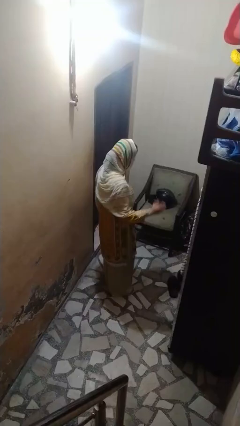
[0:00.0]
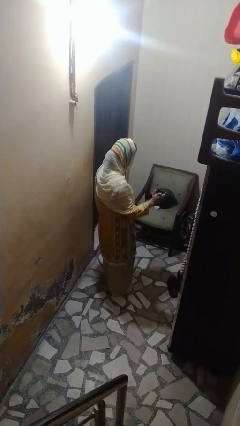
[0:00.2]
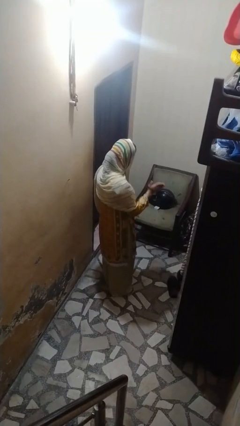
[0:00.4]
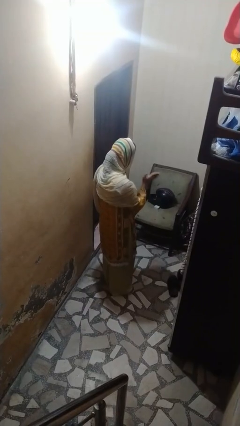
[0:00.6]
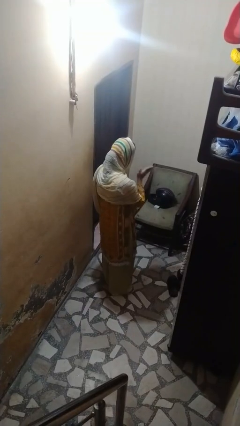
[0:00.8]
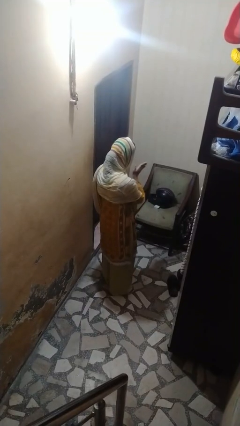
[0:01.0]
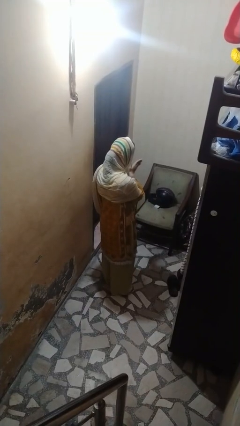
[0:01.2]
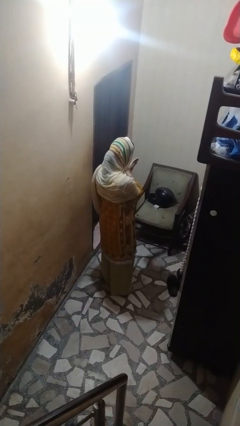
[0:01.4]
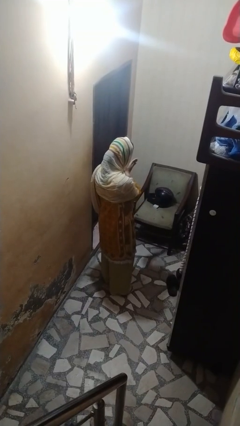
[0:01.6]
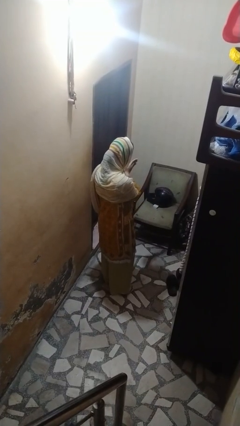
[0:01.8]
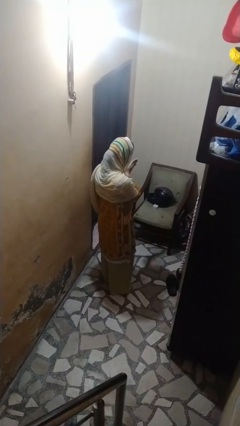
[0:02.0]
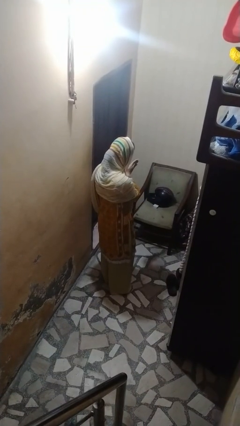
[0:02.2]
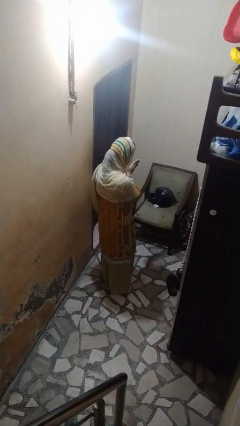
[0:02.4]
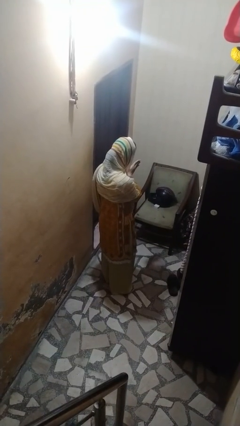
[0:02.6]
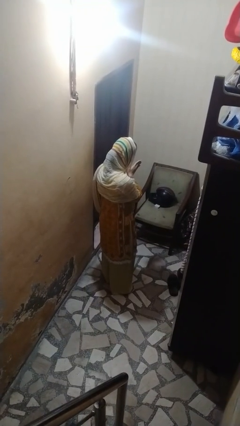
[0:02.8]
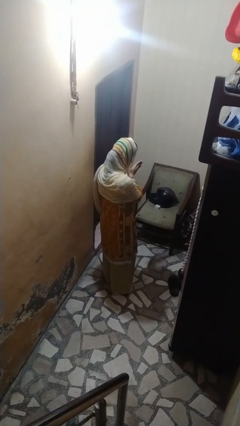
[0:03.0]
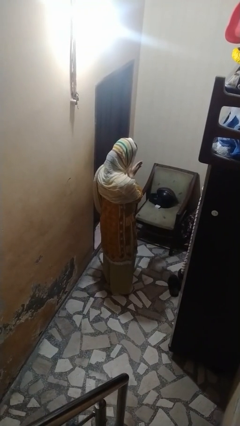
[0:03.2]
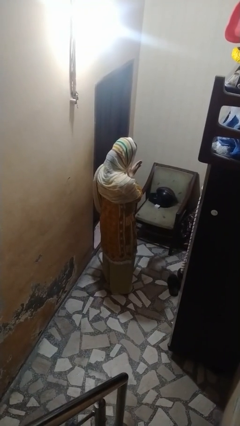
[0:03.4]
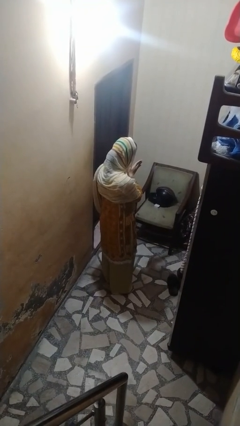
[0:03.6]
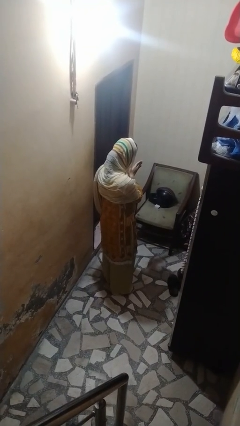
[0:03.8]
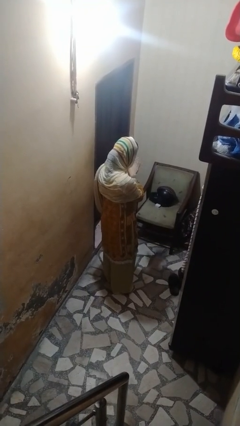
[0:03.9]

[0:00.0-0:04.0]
person gestures swipe left

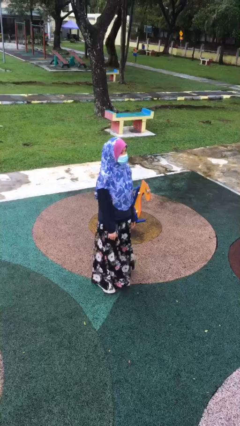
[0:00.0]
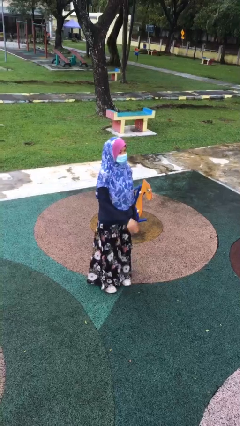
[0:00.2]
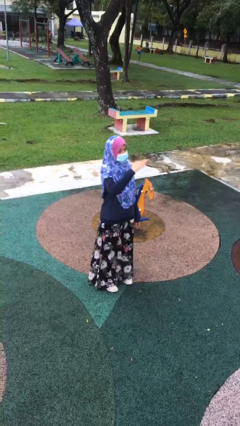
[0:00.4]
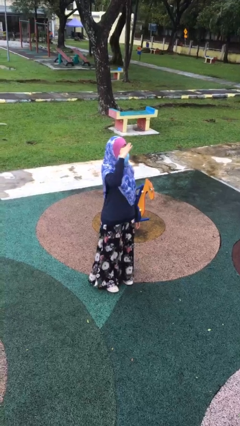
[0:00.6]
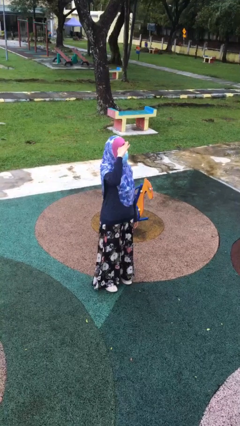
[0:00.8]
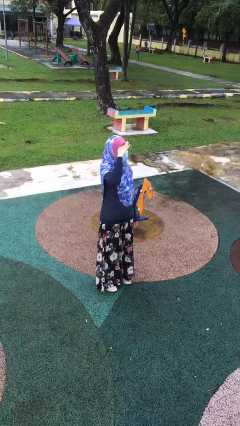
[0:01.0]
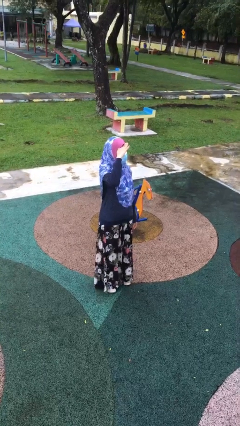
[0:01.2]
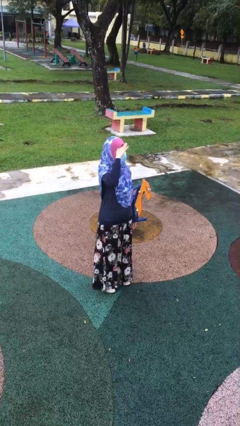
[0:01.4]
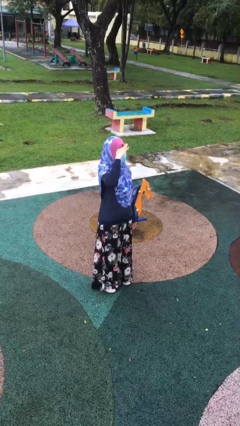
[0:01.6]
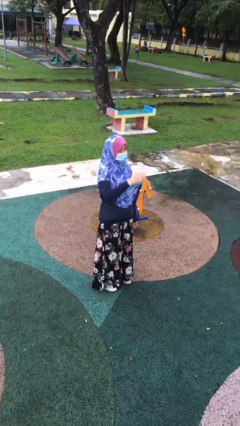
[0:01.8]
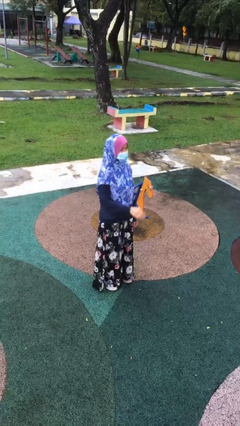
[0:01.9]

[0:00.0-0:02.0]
person salutes

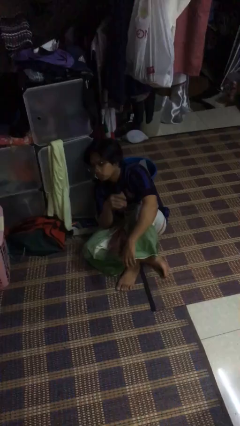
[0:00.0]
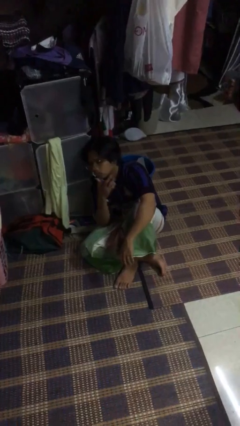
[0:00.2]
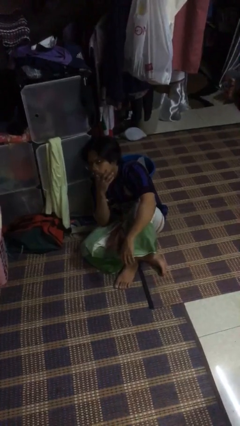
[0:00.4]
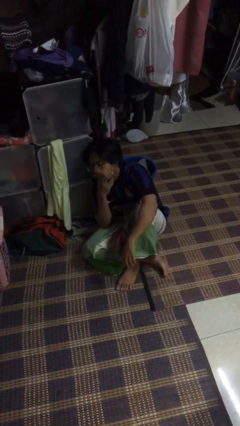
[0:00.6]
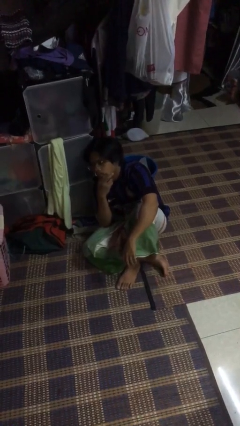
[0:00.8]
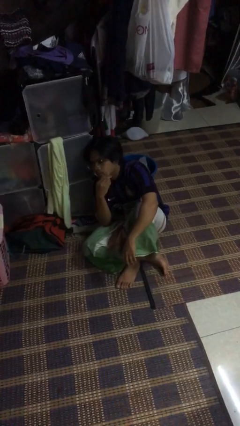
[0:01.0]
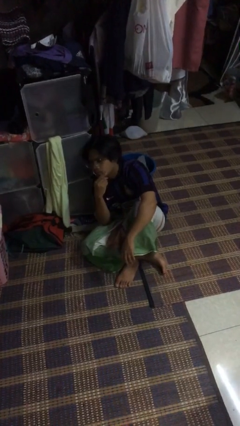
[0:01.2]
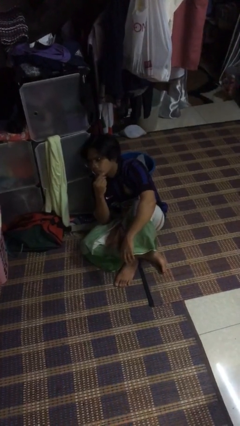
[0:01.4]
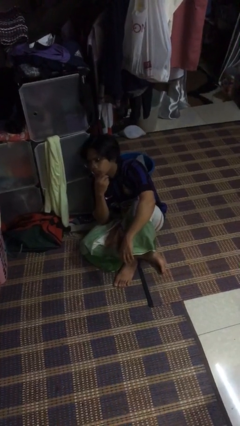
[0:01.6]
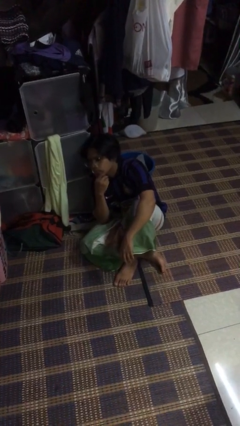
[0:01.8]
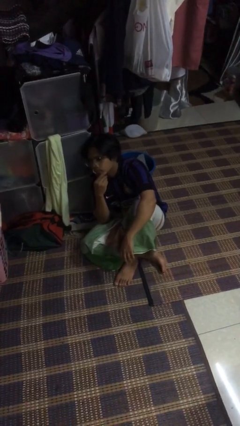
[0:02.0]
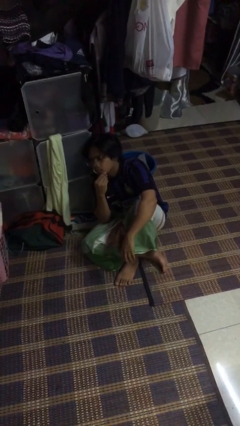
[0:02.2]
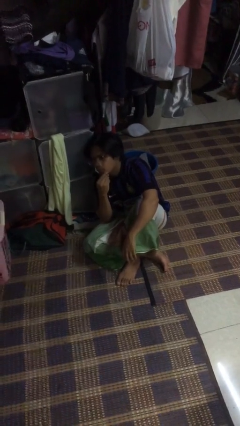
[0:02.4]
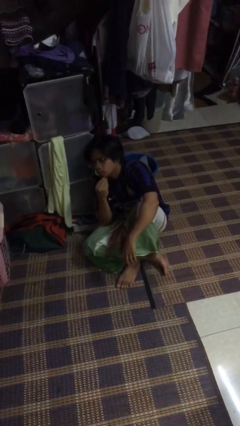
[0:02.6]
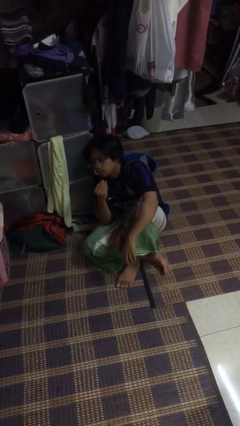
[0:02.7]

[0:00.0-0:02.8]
person strokes chin

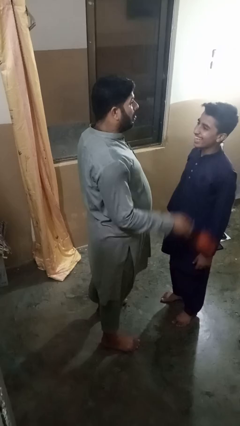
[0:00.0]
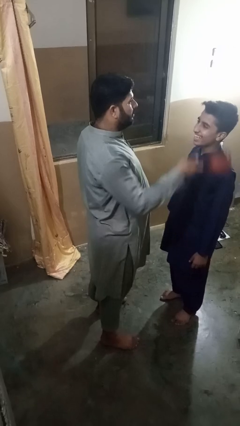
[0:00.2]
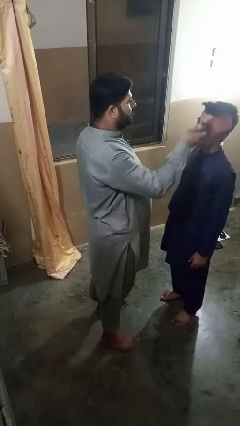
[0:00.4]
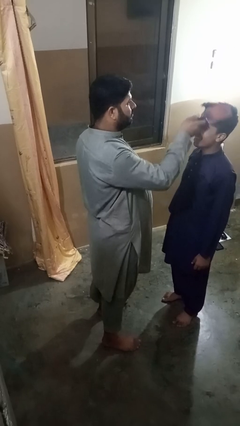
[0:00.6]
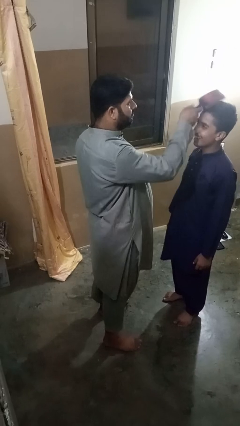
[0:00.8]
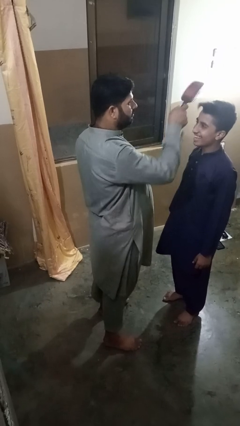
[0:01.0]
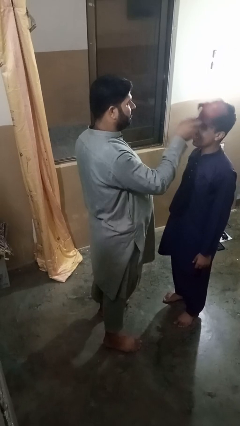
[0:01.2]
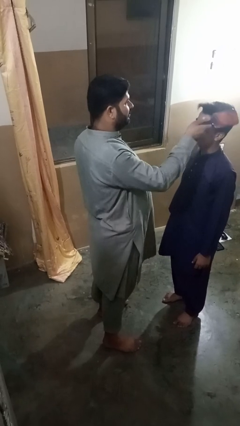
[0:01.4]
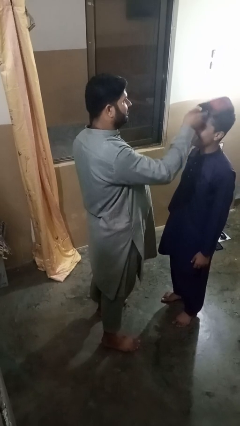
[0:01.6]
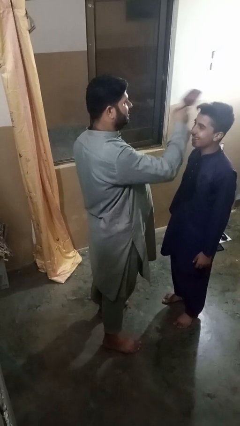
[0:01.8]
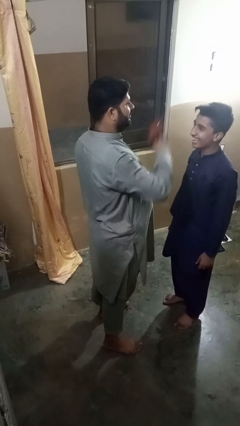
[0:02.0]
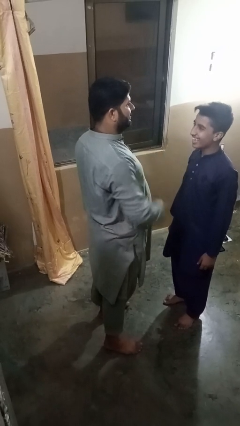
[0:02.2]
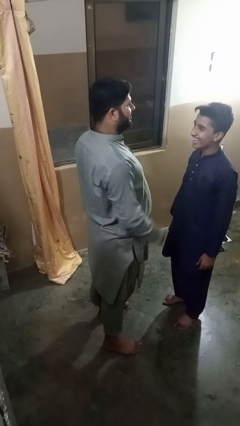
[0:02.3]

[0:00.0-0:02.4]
person brushes hair of person

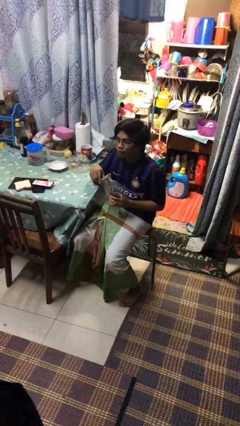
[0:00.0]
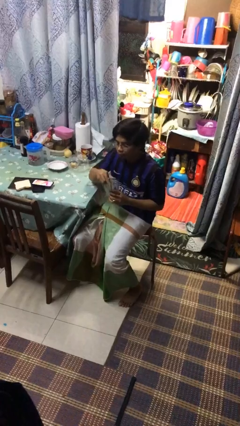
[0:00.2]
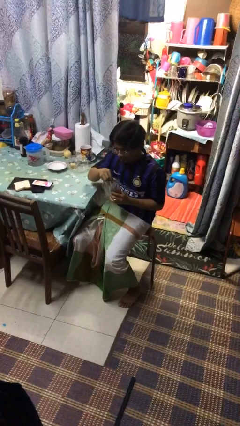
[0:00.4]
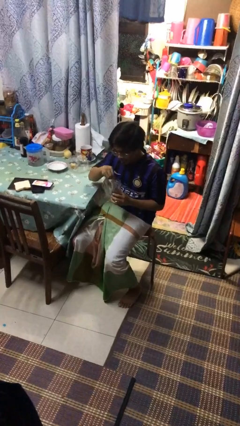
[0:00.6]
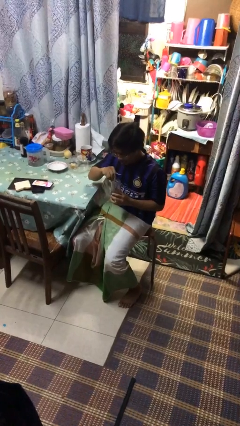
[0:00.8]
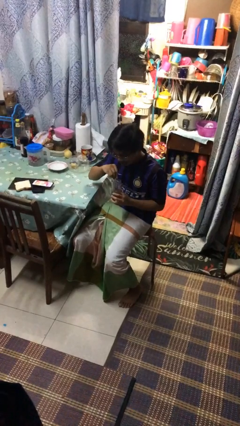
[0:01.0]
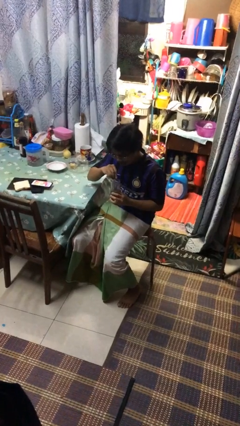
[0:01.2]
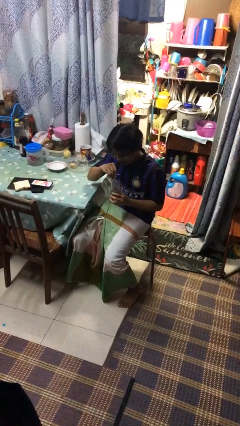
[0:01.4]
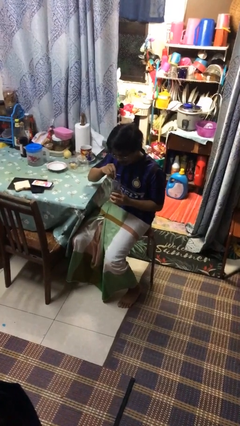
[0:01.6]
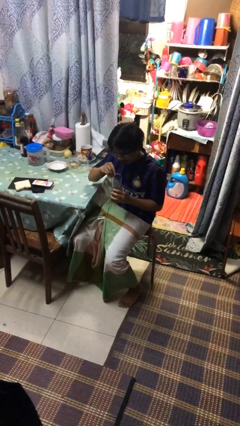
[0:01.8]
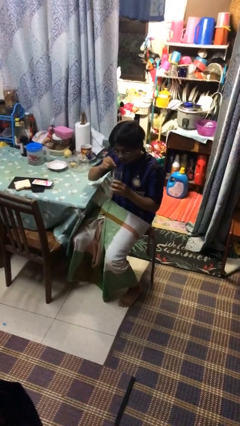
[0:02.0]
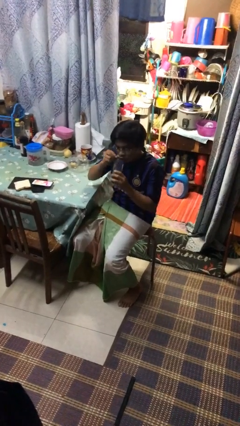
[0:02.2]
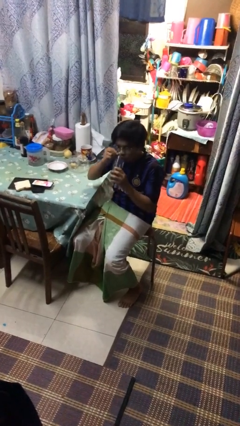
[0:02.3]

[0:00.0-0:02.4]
person stirs mug

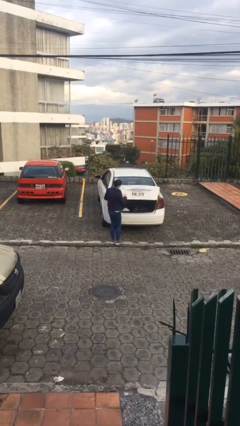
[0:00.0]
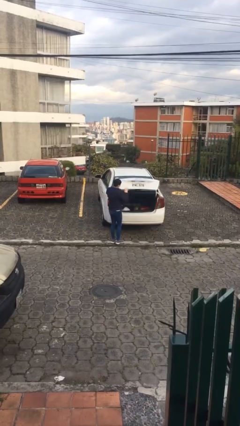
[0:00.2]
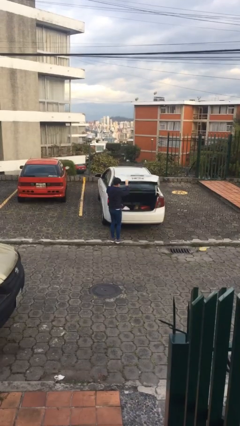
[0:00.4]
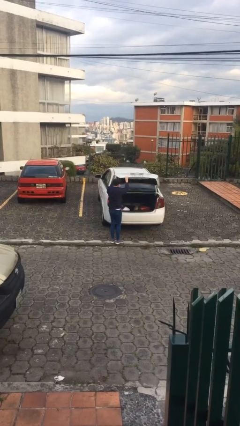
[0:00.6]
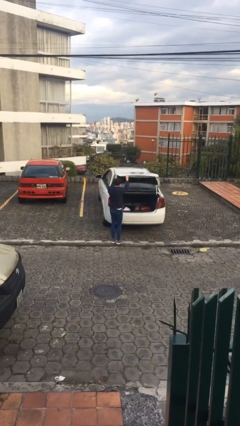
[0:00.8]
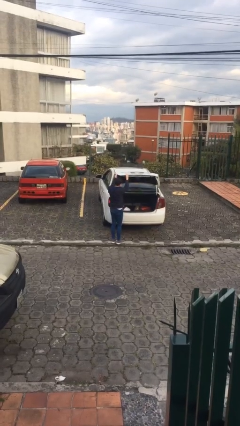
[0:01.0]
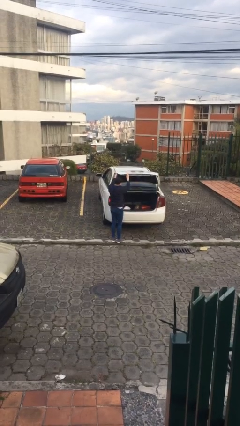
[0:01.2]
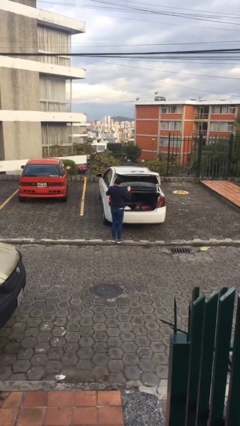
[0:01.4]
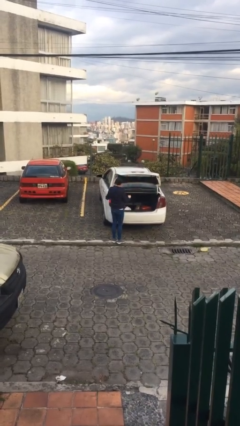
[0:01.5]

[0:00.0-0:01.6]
person opens car trunk

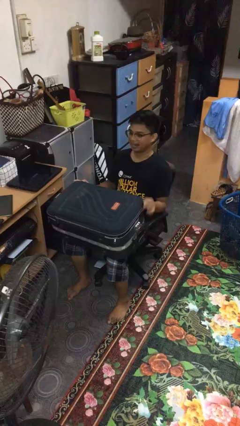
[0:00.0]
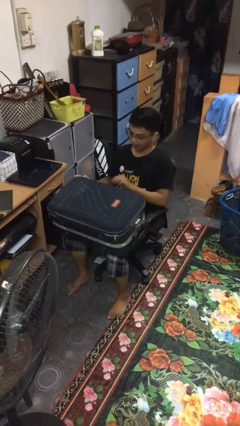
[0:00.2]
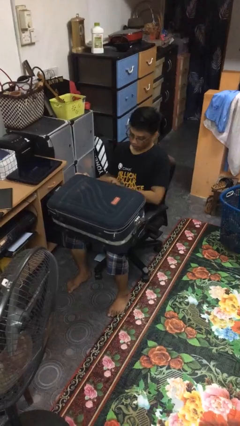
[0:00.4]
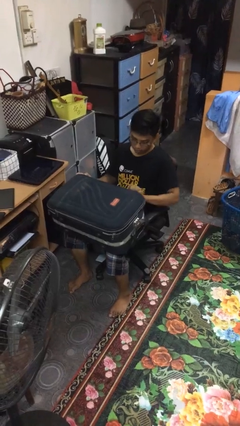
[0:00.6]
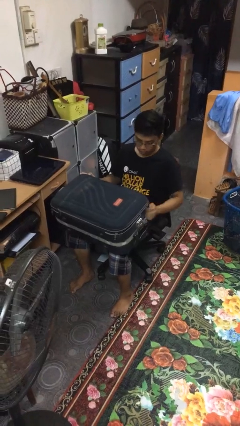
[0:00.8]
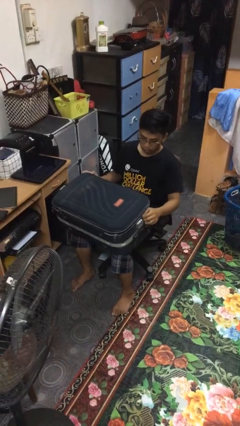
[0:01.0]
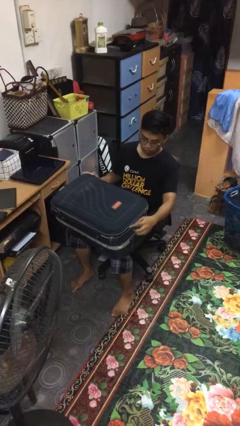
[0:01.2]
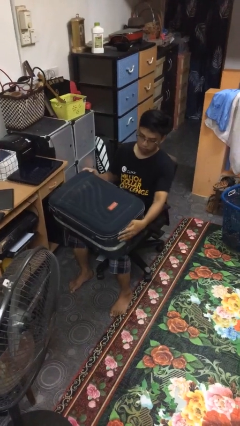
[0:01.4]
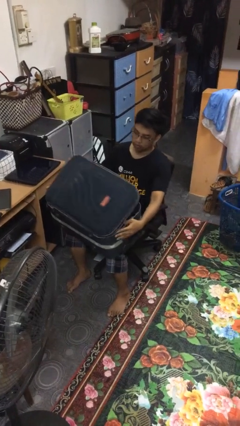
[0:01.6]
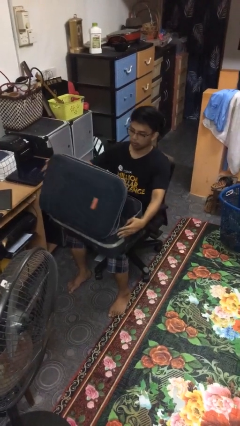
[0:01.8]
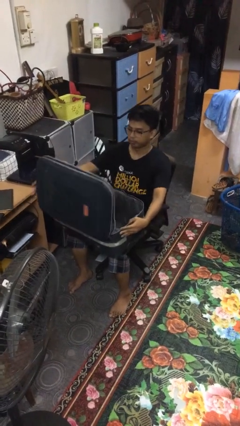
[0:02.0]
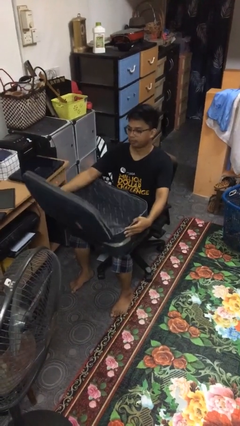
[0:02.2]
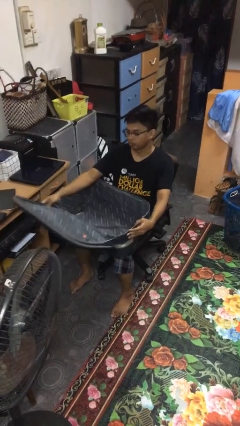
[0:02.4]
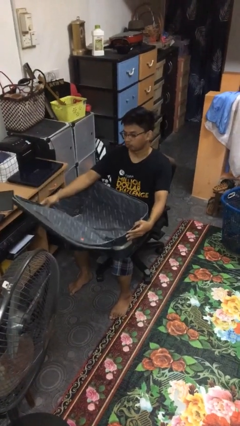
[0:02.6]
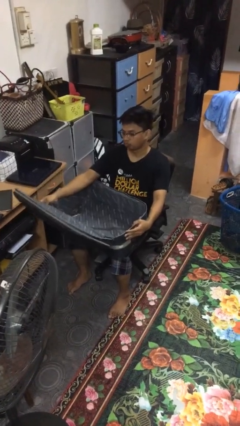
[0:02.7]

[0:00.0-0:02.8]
person opens suitcase
